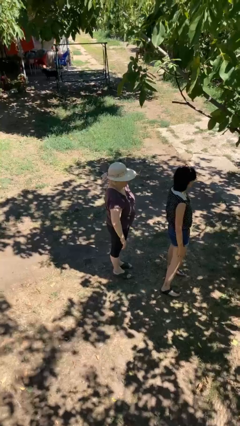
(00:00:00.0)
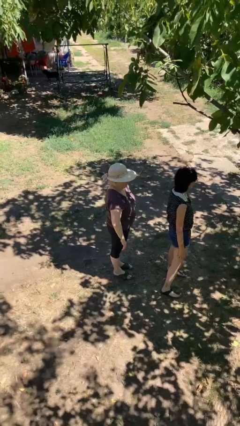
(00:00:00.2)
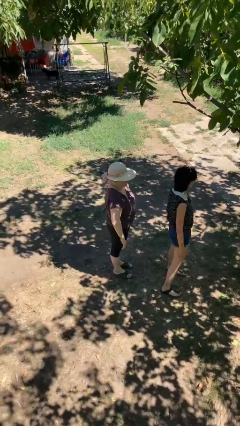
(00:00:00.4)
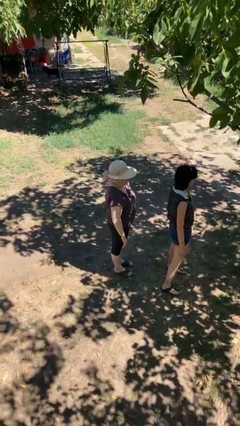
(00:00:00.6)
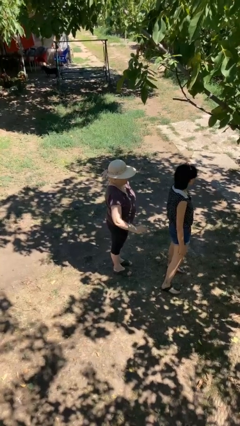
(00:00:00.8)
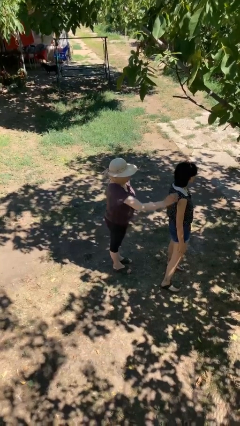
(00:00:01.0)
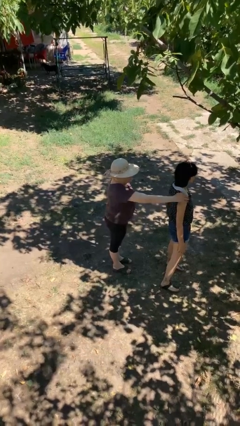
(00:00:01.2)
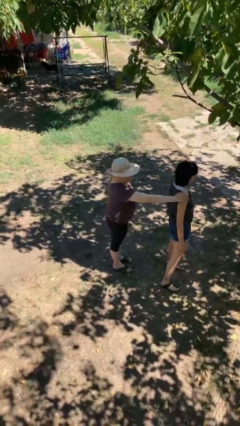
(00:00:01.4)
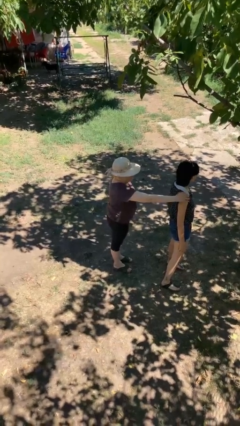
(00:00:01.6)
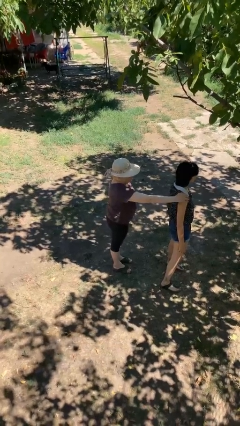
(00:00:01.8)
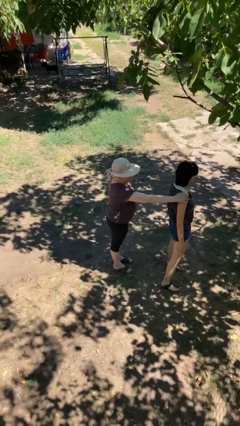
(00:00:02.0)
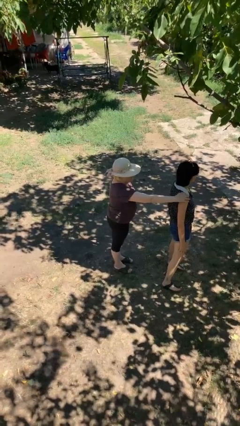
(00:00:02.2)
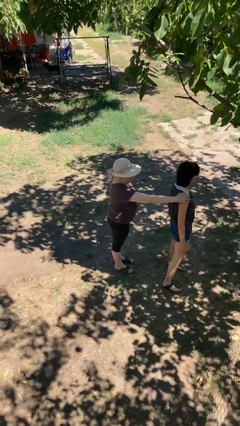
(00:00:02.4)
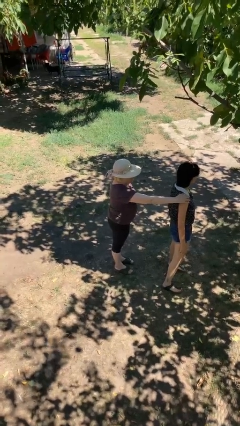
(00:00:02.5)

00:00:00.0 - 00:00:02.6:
person grabs person by shoulder

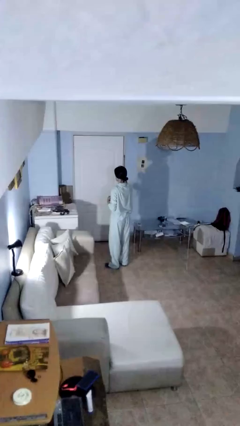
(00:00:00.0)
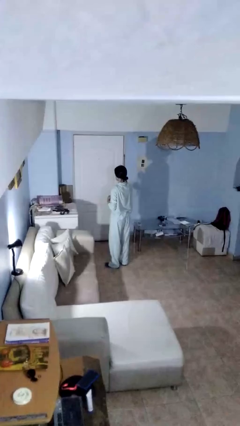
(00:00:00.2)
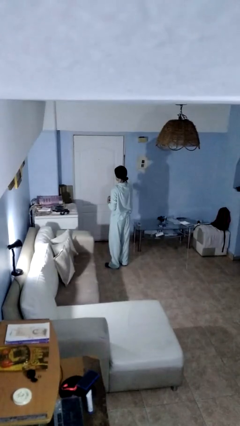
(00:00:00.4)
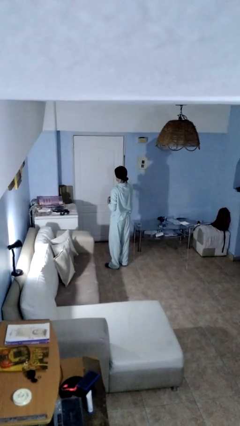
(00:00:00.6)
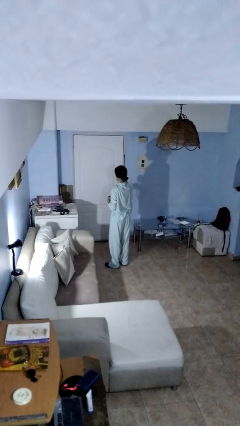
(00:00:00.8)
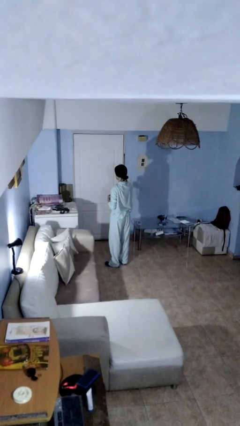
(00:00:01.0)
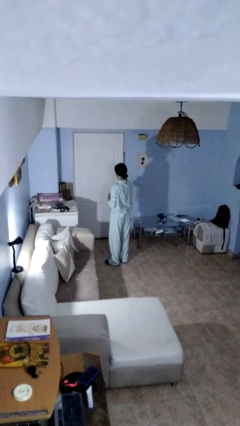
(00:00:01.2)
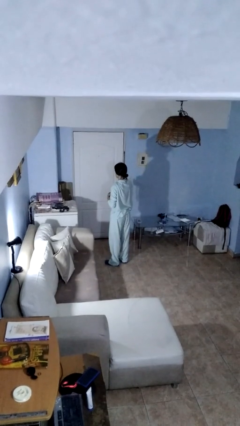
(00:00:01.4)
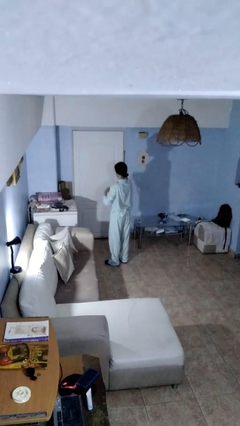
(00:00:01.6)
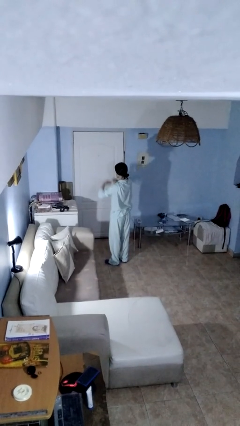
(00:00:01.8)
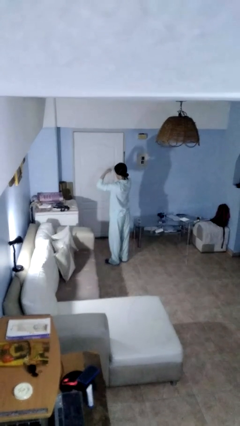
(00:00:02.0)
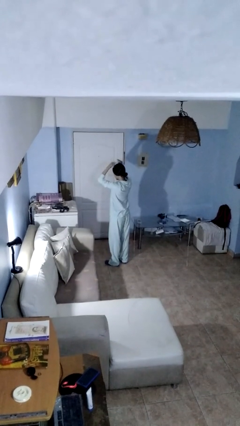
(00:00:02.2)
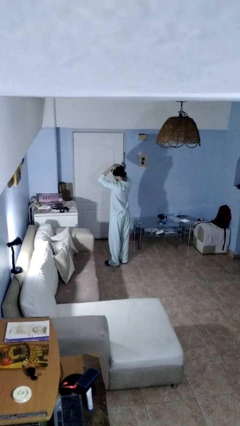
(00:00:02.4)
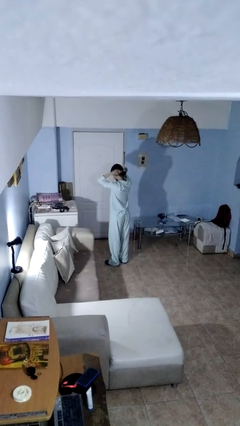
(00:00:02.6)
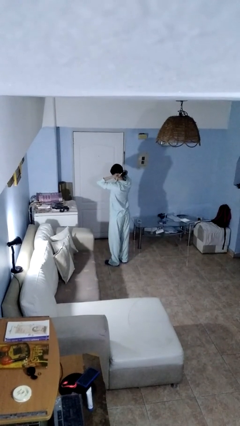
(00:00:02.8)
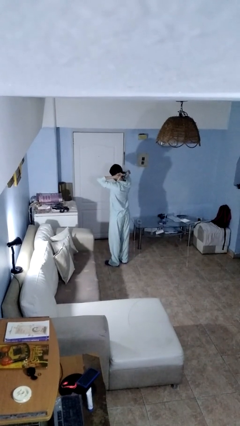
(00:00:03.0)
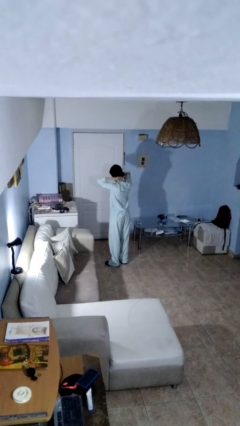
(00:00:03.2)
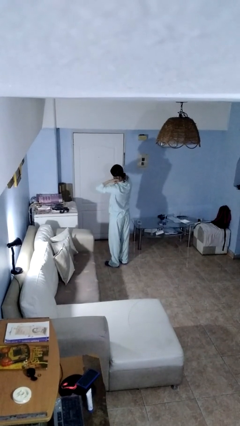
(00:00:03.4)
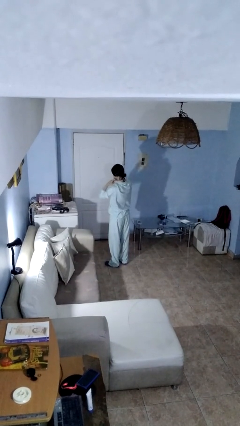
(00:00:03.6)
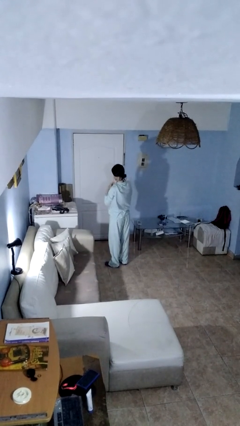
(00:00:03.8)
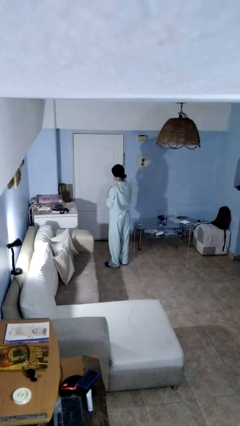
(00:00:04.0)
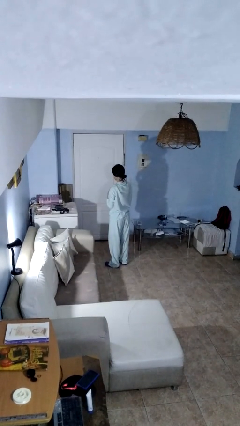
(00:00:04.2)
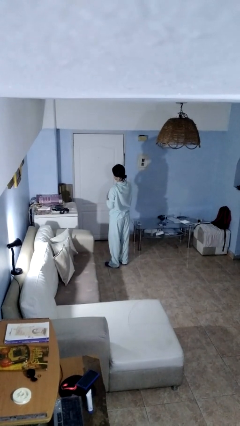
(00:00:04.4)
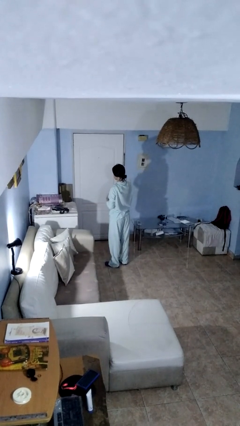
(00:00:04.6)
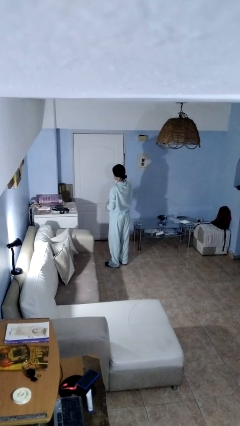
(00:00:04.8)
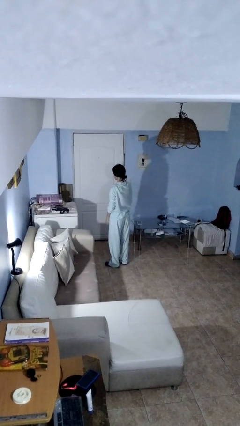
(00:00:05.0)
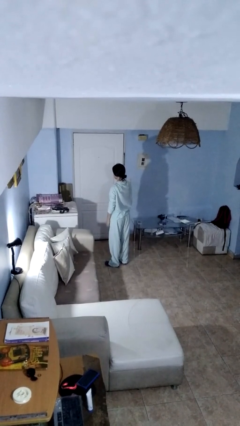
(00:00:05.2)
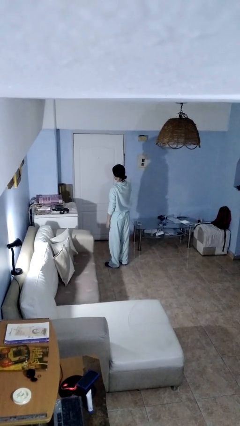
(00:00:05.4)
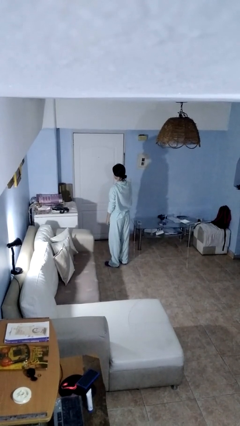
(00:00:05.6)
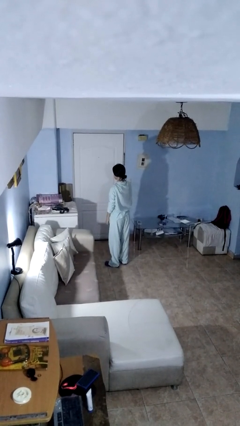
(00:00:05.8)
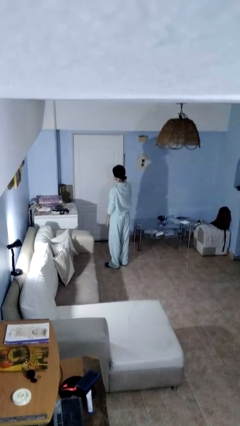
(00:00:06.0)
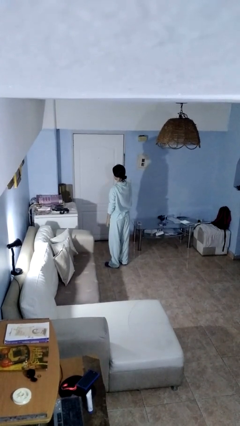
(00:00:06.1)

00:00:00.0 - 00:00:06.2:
person puts on necklace

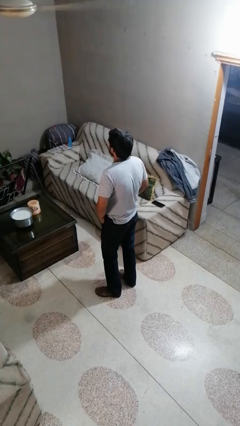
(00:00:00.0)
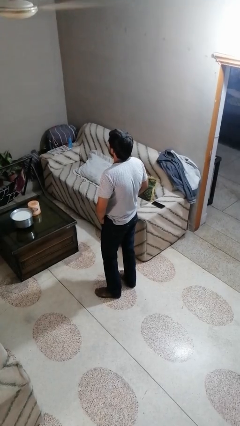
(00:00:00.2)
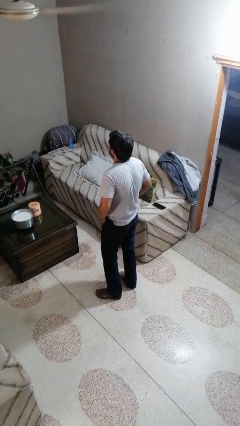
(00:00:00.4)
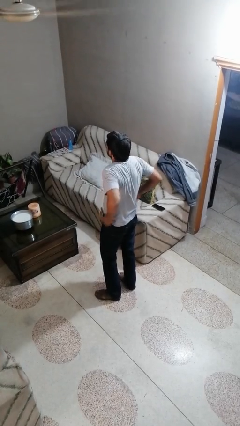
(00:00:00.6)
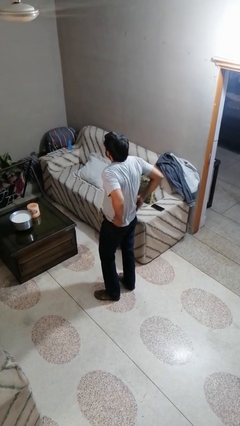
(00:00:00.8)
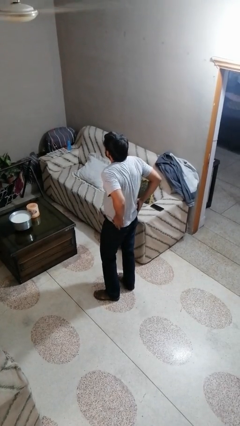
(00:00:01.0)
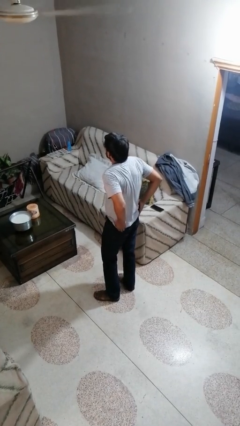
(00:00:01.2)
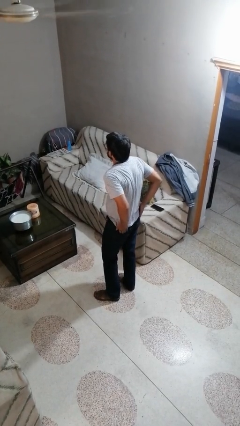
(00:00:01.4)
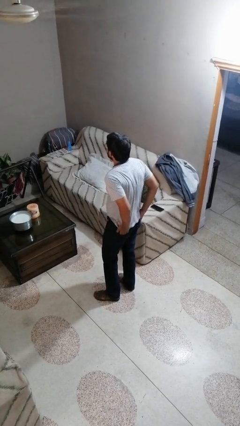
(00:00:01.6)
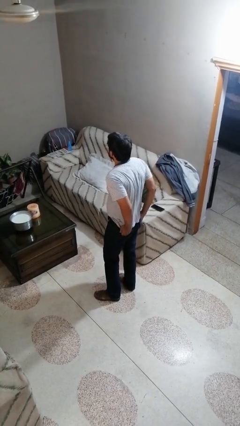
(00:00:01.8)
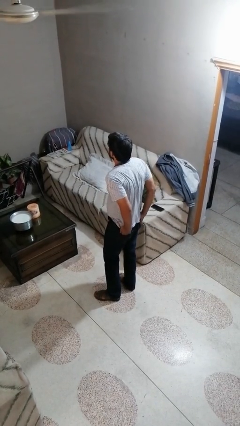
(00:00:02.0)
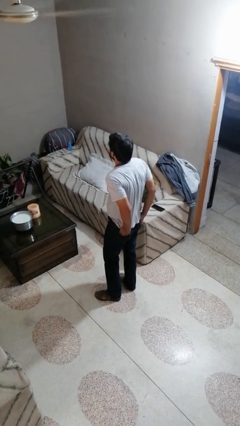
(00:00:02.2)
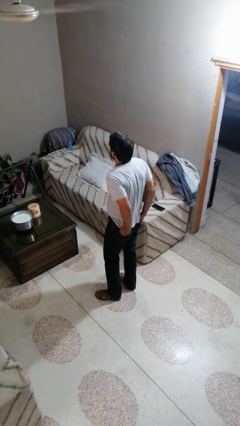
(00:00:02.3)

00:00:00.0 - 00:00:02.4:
person puts hands in back pockets

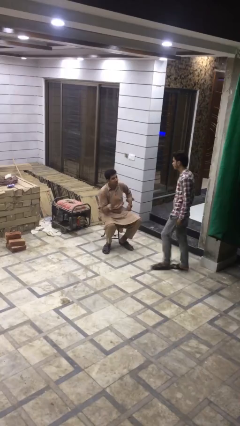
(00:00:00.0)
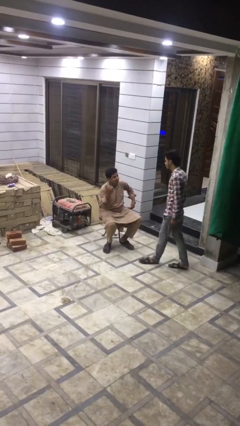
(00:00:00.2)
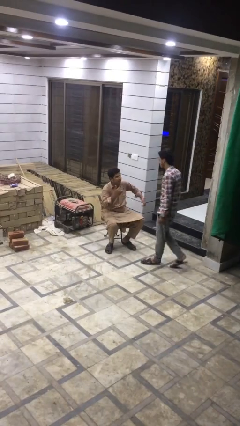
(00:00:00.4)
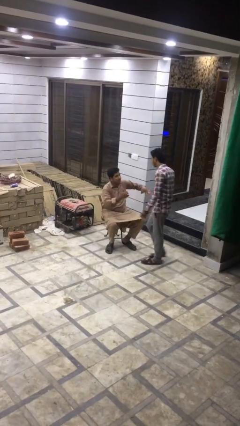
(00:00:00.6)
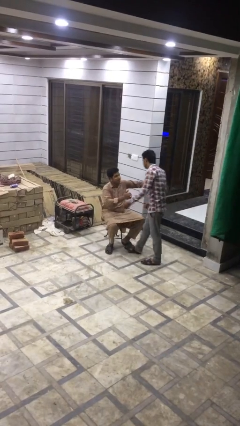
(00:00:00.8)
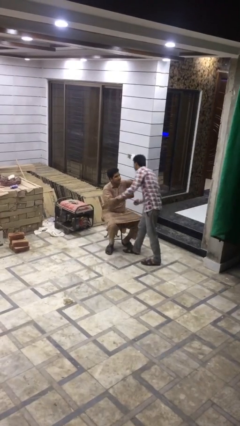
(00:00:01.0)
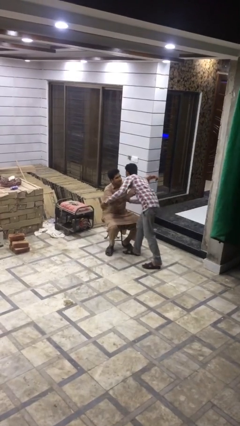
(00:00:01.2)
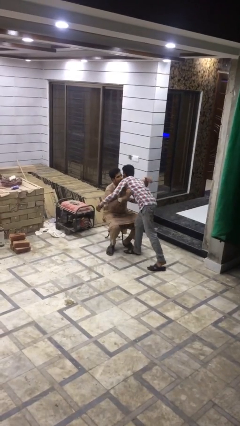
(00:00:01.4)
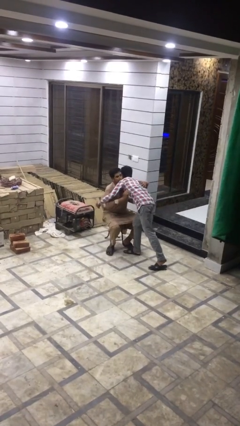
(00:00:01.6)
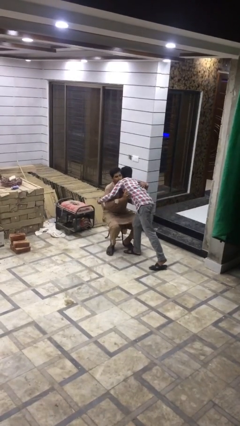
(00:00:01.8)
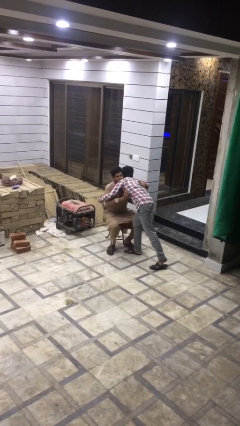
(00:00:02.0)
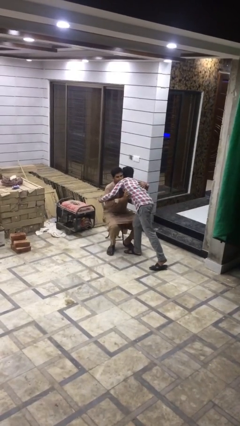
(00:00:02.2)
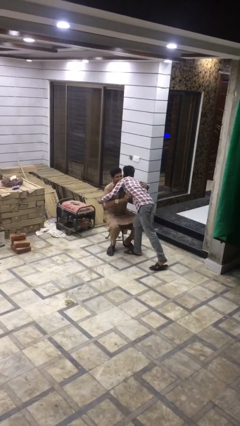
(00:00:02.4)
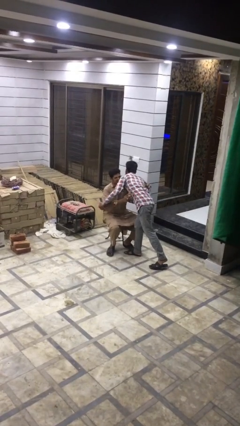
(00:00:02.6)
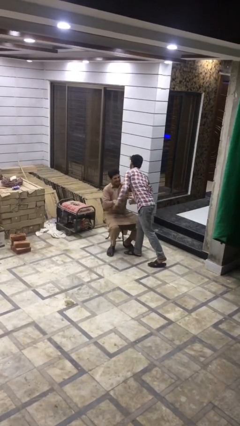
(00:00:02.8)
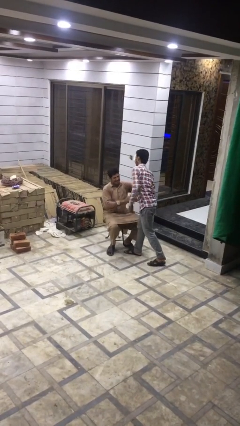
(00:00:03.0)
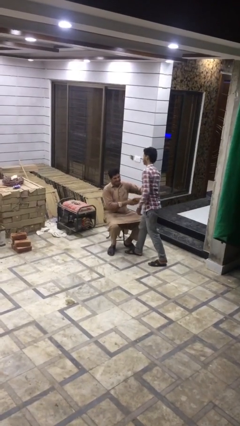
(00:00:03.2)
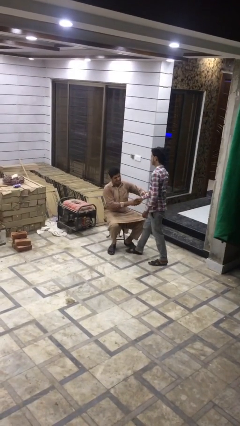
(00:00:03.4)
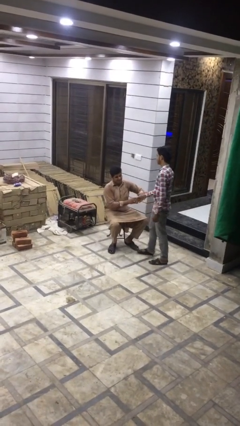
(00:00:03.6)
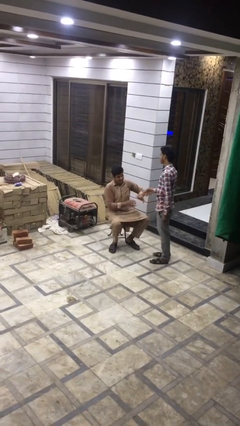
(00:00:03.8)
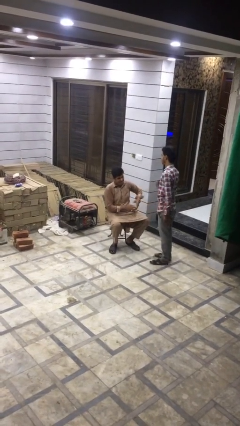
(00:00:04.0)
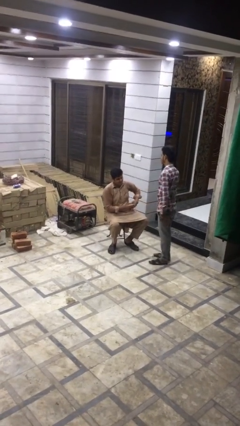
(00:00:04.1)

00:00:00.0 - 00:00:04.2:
person embraces person

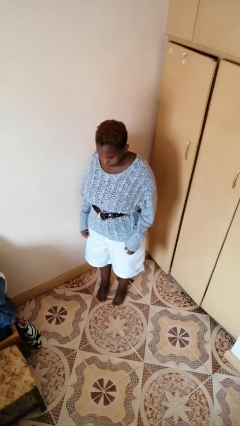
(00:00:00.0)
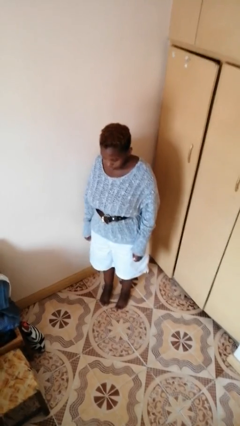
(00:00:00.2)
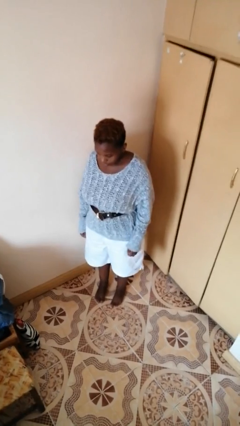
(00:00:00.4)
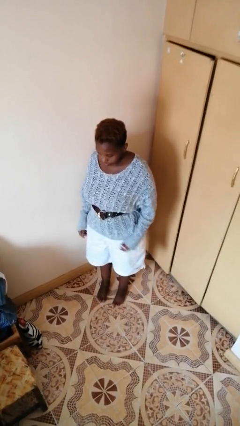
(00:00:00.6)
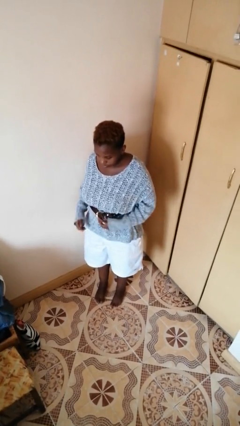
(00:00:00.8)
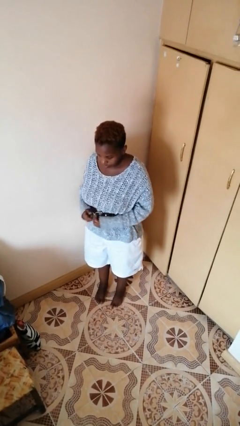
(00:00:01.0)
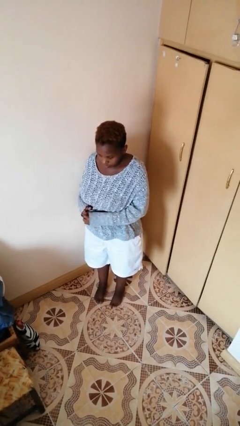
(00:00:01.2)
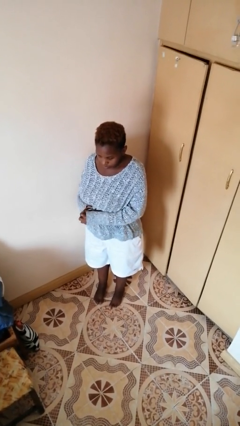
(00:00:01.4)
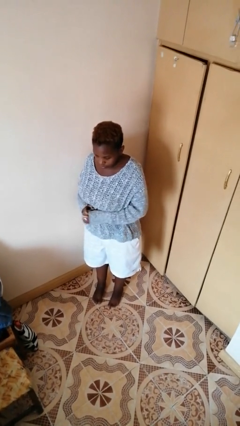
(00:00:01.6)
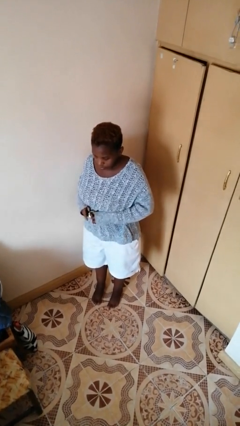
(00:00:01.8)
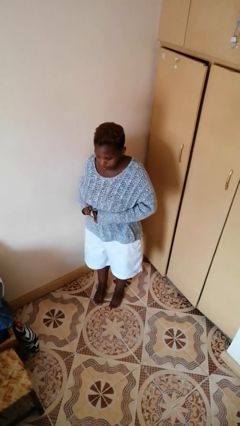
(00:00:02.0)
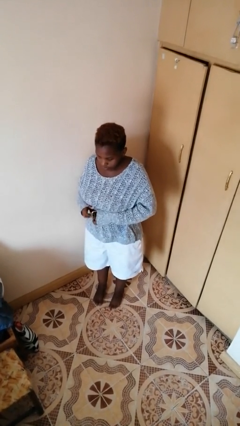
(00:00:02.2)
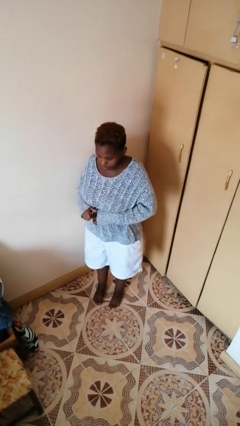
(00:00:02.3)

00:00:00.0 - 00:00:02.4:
person takes off belt
